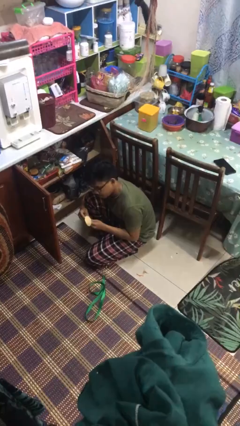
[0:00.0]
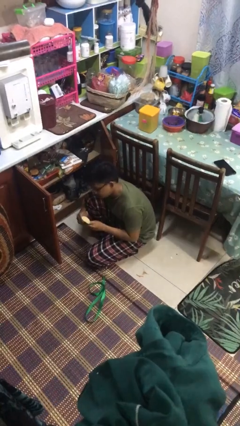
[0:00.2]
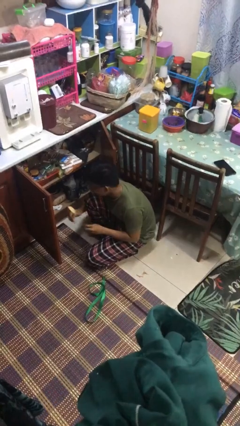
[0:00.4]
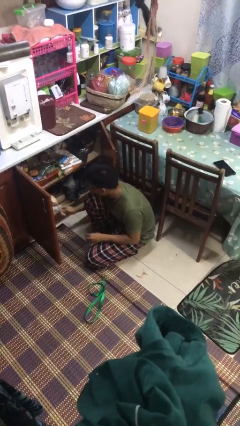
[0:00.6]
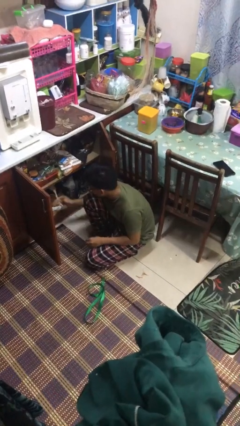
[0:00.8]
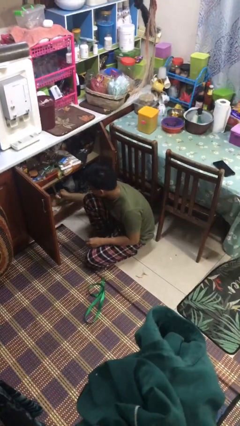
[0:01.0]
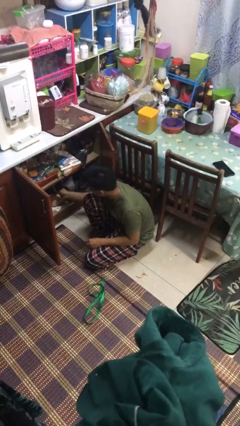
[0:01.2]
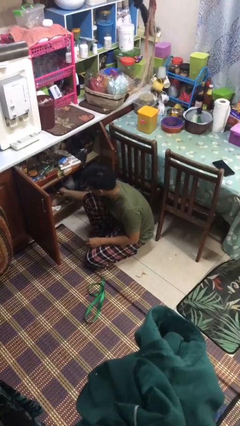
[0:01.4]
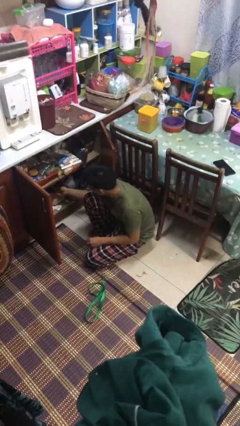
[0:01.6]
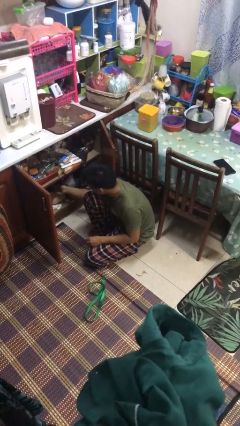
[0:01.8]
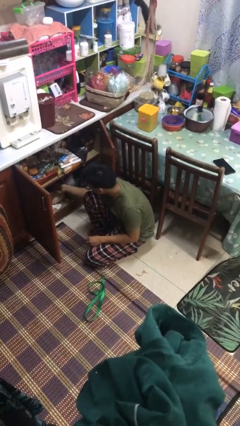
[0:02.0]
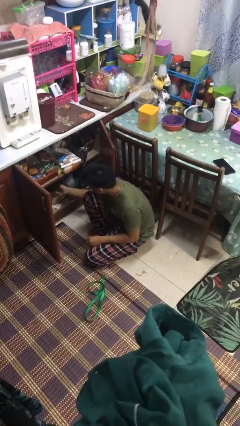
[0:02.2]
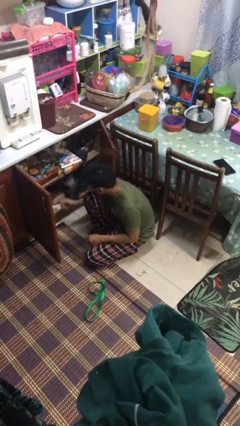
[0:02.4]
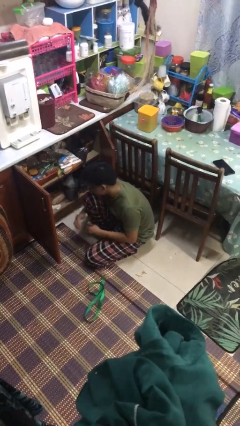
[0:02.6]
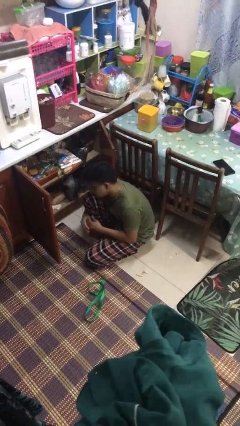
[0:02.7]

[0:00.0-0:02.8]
person puts object into kitchen drawer

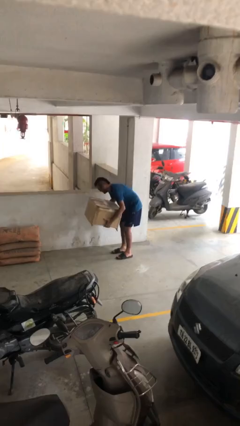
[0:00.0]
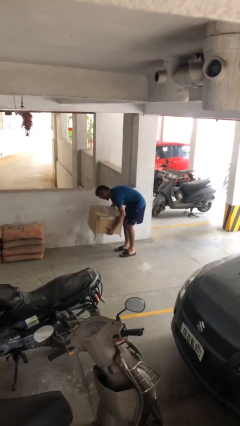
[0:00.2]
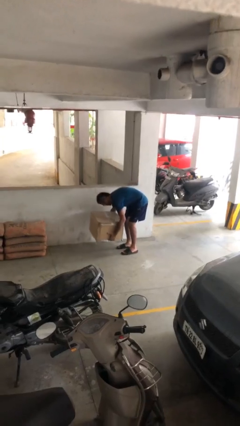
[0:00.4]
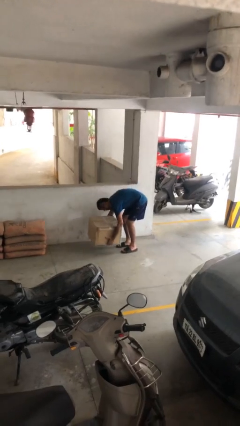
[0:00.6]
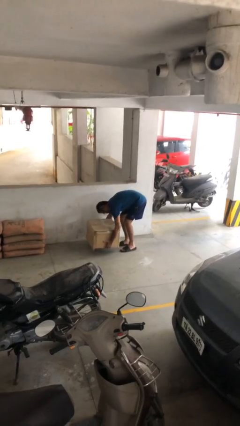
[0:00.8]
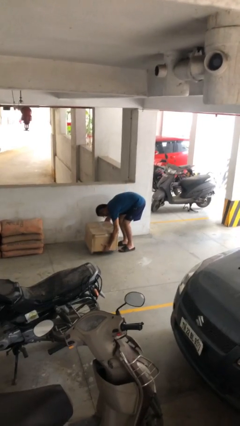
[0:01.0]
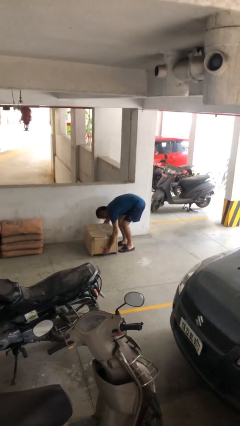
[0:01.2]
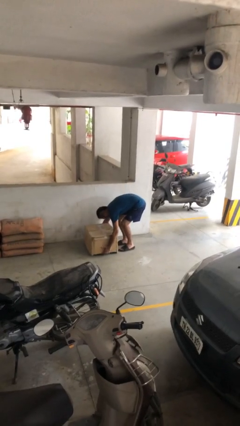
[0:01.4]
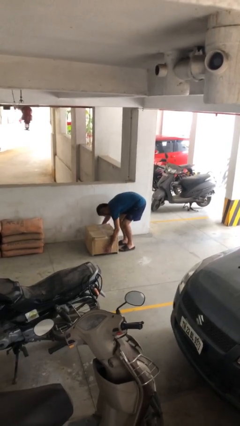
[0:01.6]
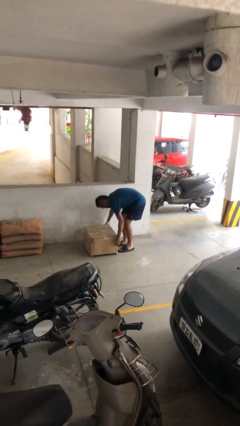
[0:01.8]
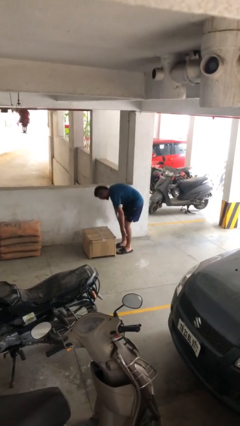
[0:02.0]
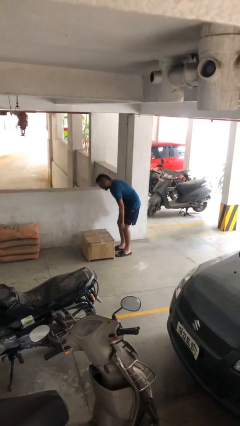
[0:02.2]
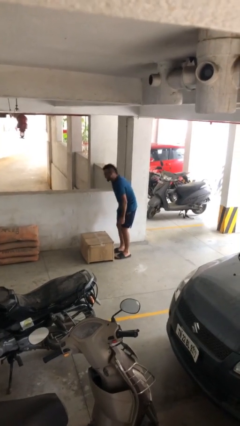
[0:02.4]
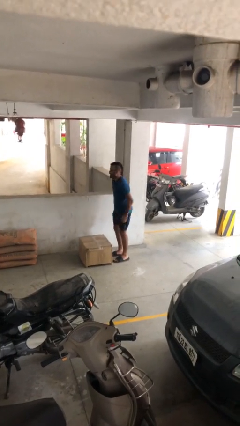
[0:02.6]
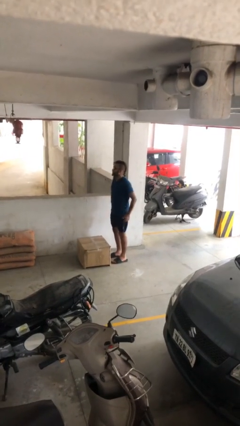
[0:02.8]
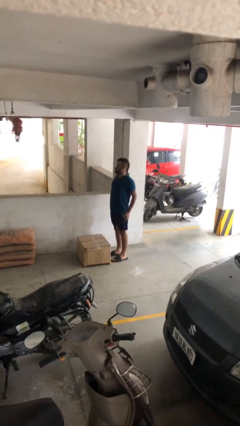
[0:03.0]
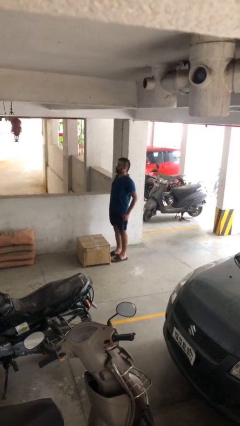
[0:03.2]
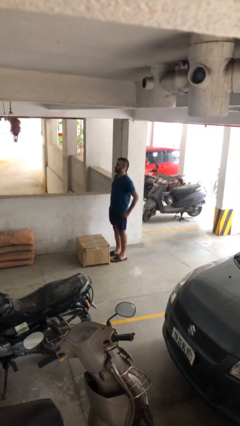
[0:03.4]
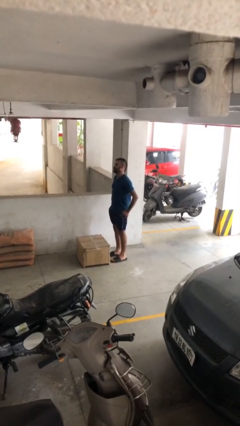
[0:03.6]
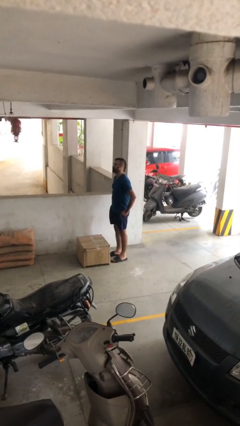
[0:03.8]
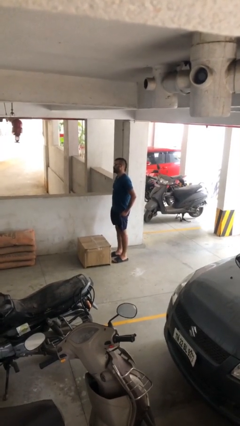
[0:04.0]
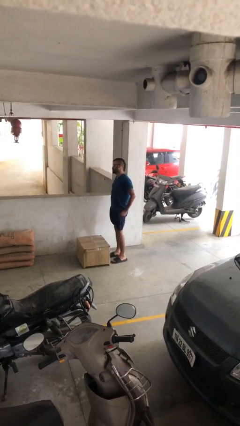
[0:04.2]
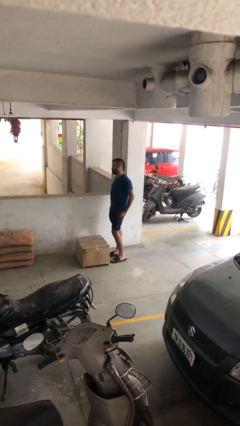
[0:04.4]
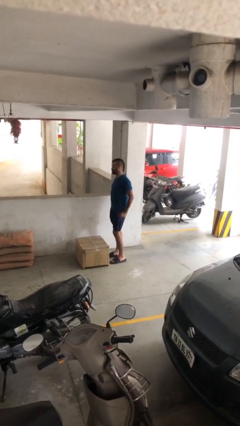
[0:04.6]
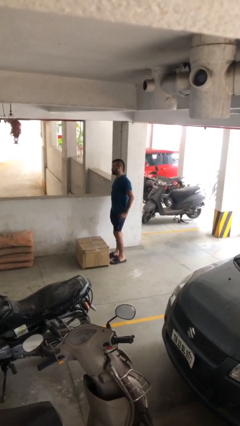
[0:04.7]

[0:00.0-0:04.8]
person puts down object on floor

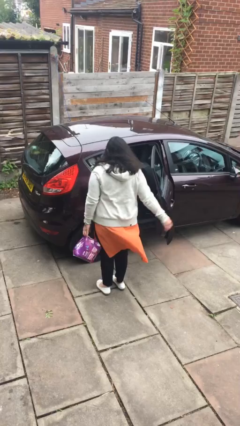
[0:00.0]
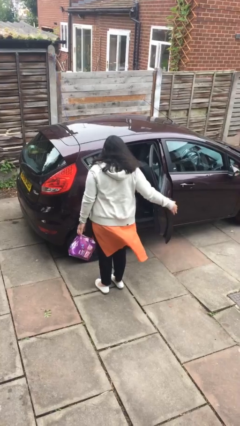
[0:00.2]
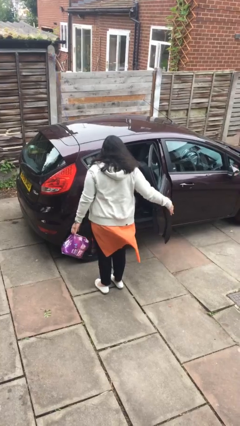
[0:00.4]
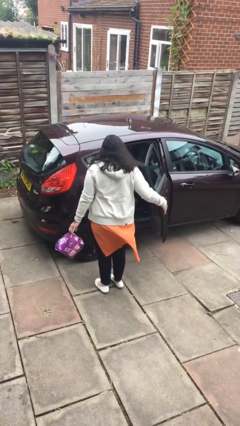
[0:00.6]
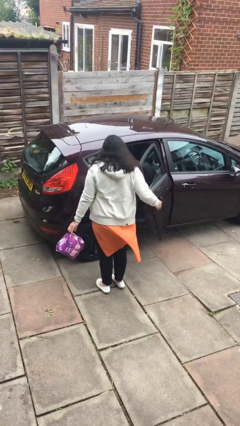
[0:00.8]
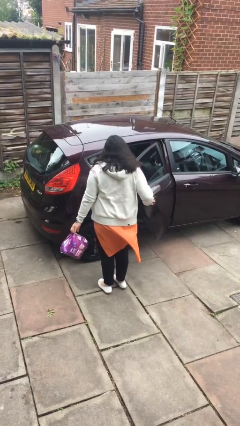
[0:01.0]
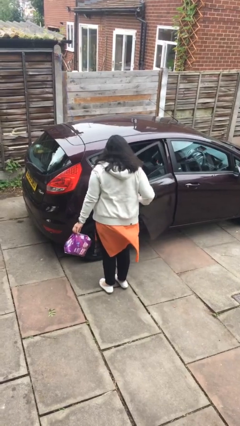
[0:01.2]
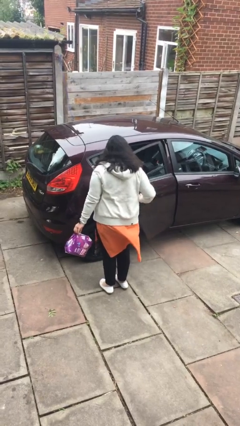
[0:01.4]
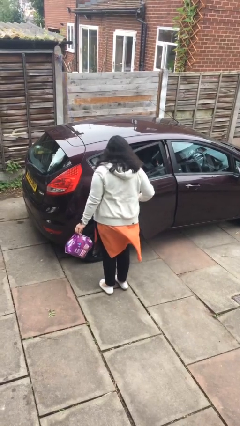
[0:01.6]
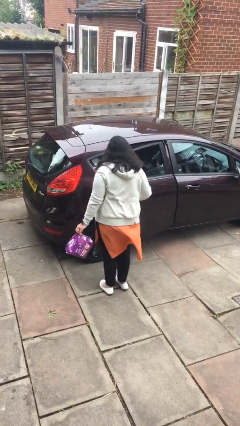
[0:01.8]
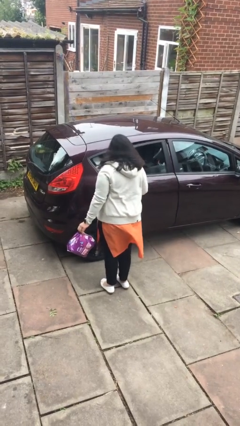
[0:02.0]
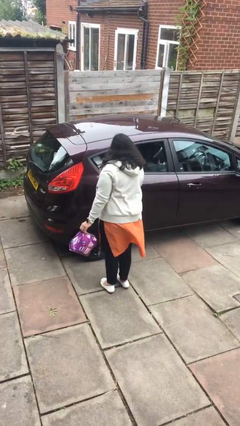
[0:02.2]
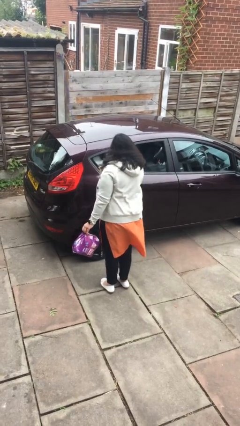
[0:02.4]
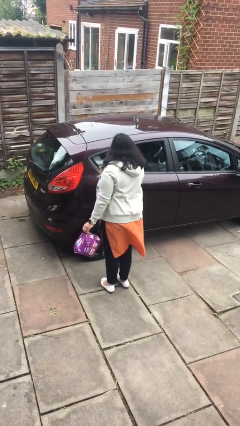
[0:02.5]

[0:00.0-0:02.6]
person closes car door

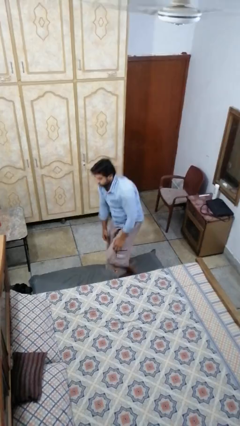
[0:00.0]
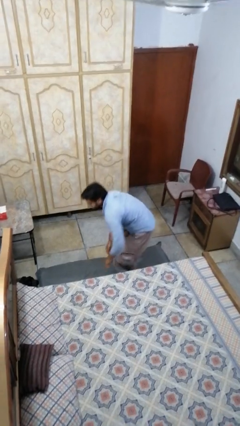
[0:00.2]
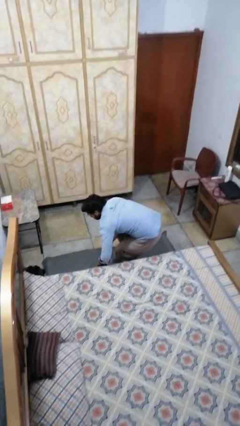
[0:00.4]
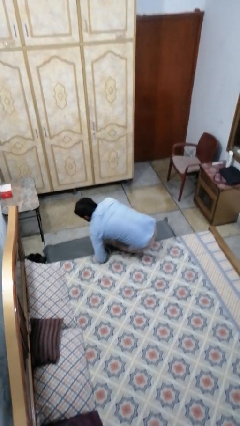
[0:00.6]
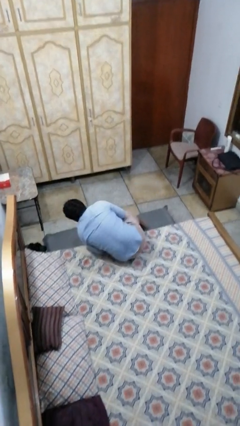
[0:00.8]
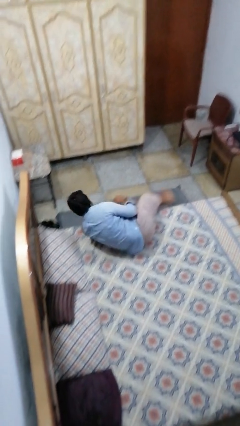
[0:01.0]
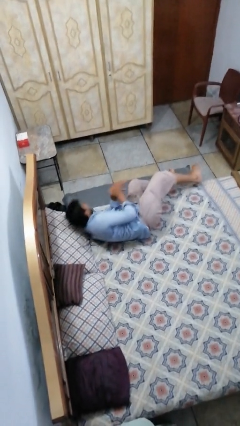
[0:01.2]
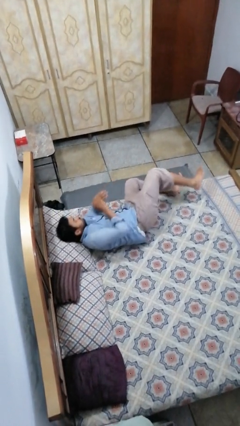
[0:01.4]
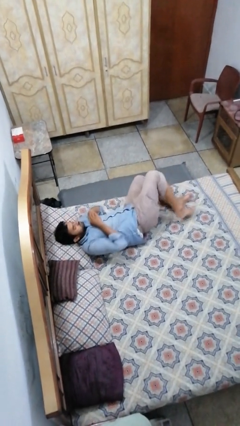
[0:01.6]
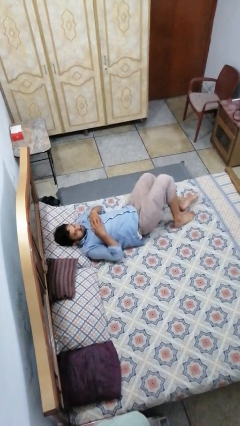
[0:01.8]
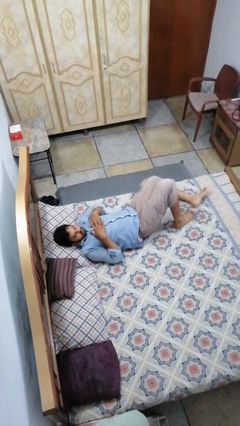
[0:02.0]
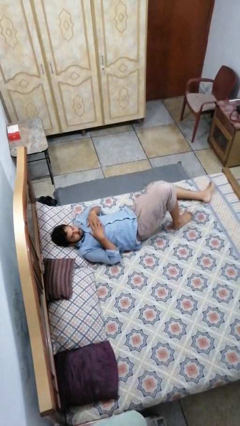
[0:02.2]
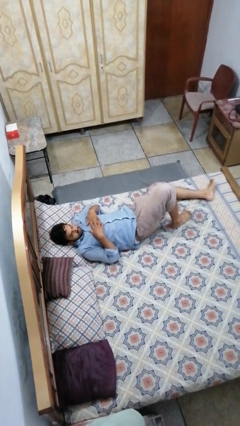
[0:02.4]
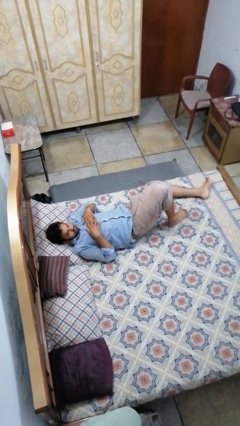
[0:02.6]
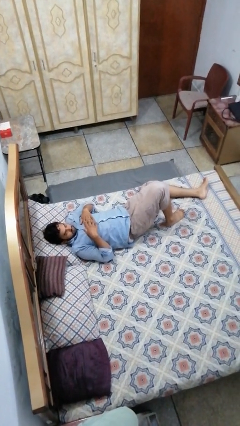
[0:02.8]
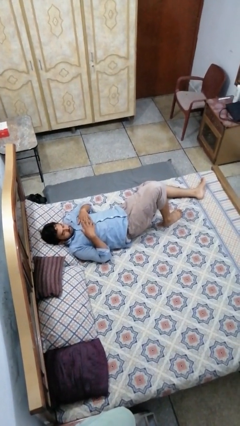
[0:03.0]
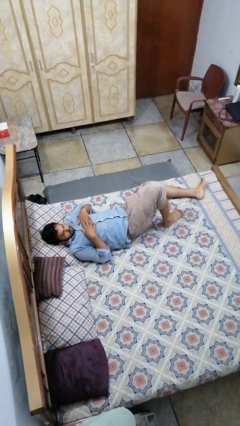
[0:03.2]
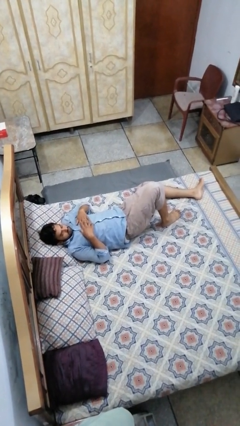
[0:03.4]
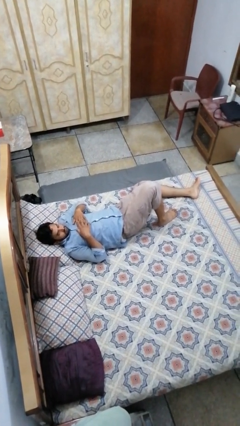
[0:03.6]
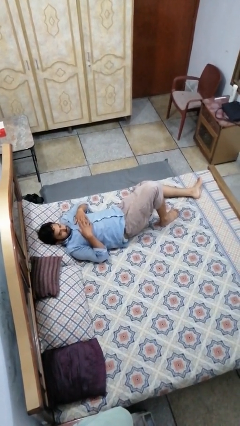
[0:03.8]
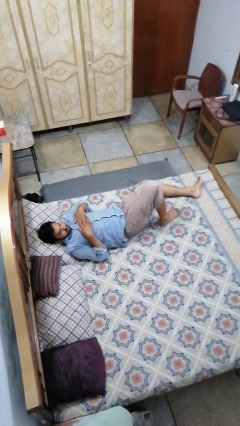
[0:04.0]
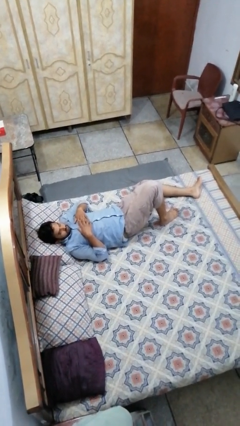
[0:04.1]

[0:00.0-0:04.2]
person lies down on bed

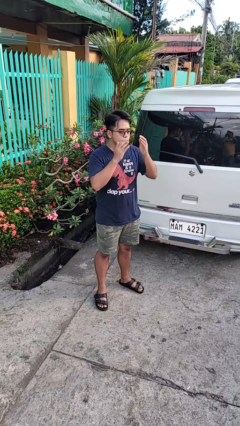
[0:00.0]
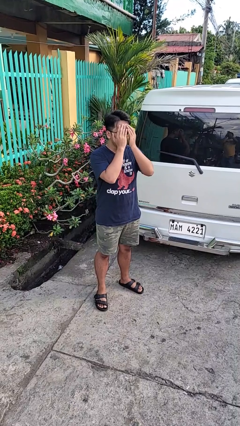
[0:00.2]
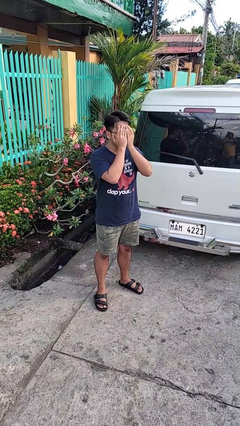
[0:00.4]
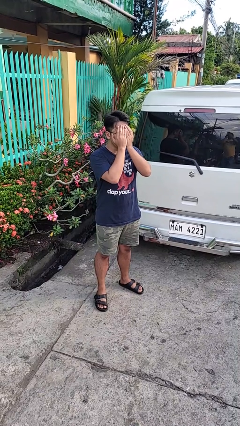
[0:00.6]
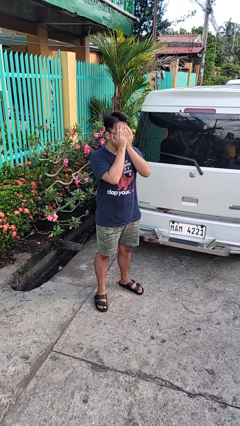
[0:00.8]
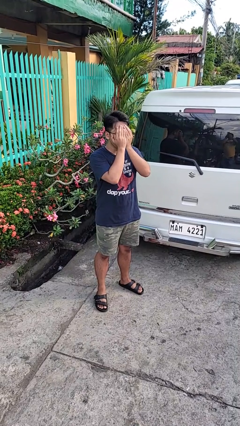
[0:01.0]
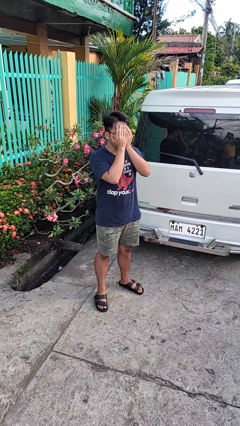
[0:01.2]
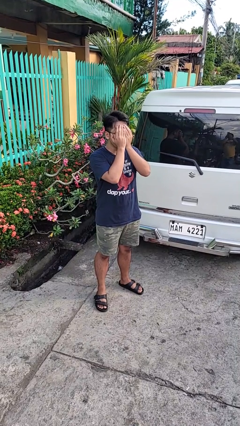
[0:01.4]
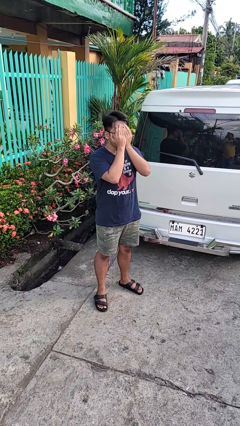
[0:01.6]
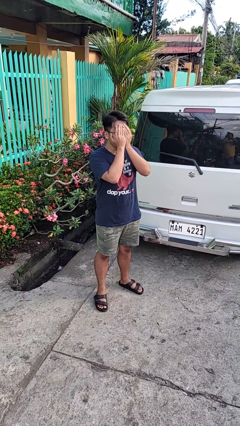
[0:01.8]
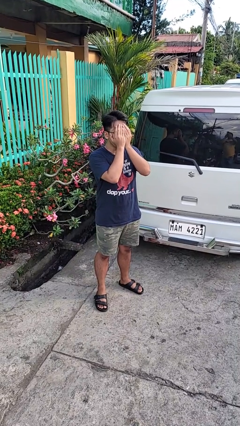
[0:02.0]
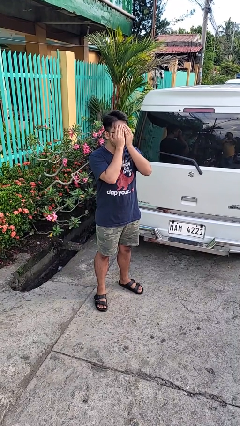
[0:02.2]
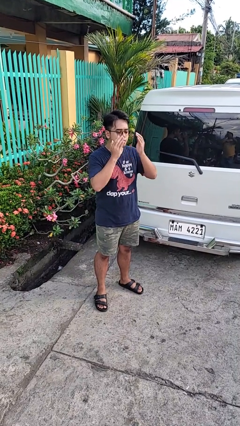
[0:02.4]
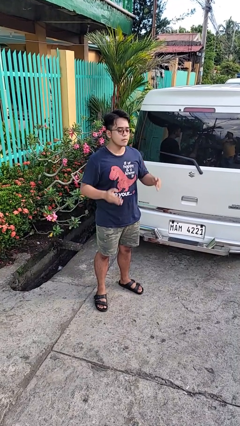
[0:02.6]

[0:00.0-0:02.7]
person covers face with hands
